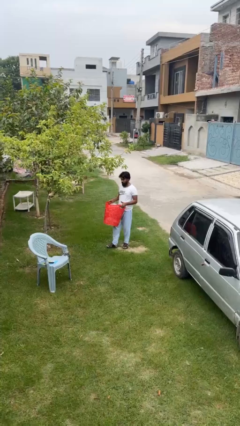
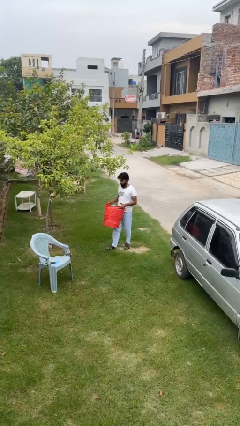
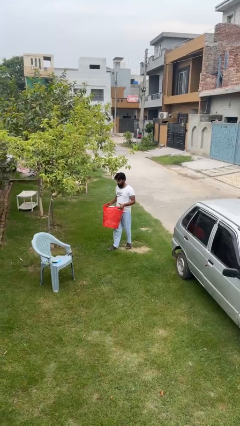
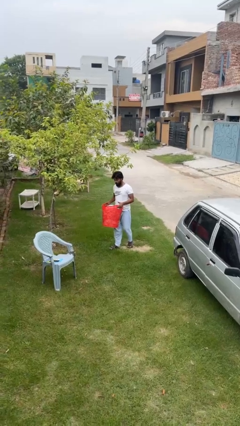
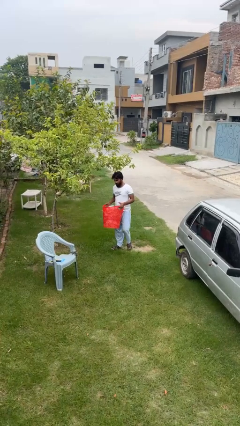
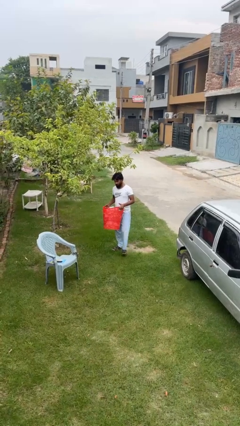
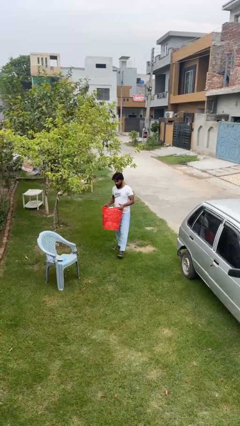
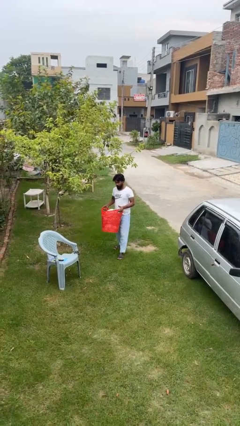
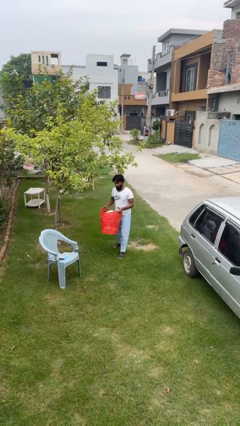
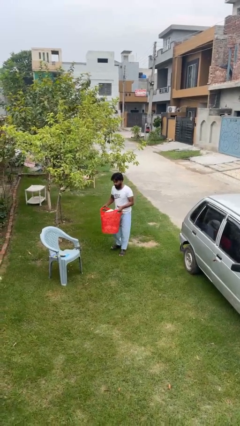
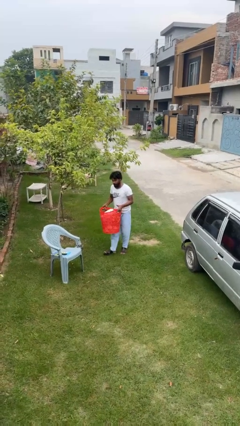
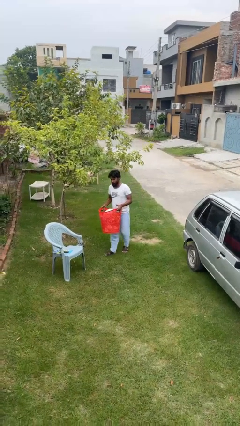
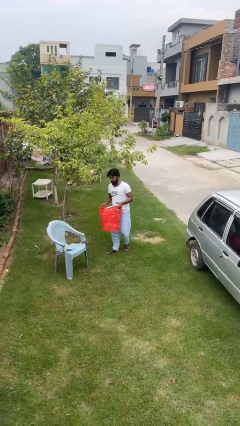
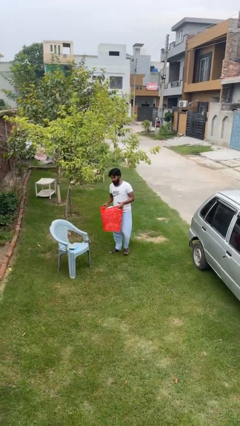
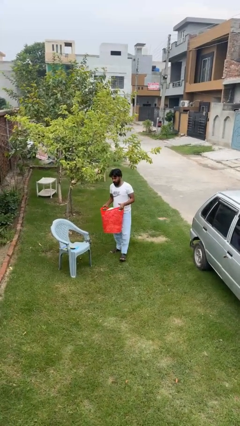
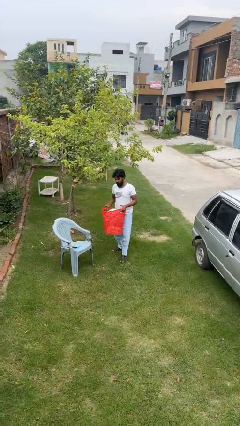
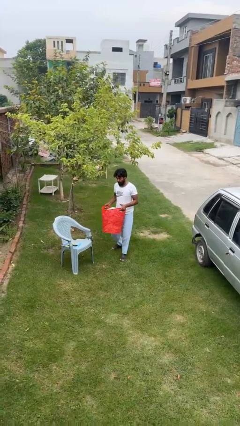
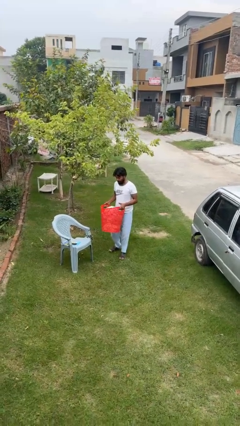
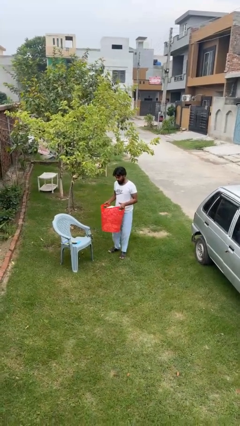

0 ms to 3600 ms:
person carries laundry basket

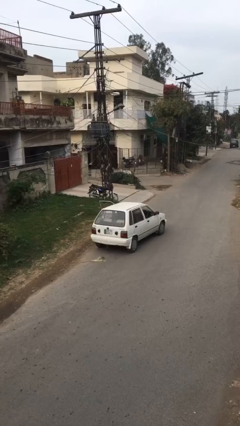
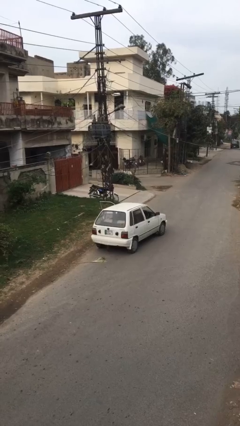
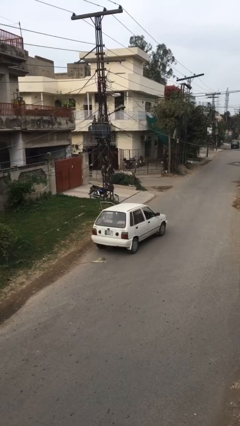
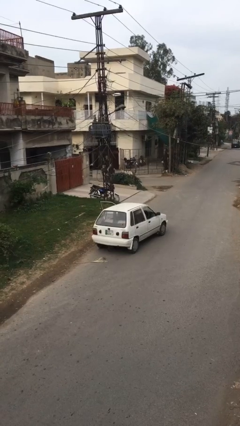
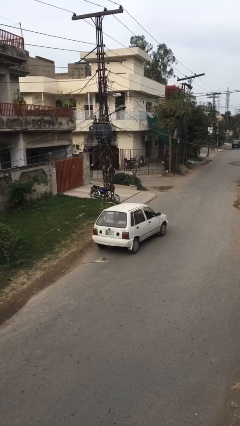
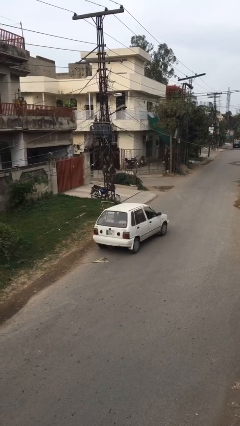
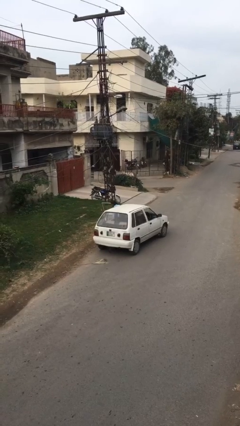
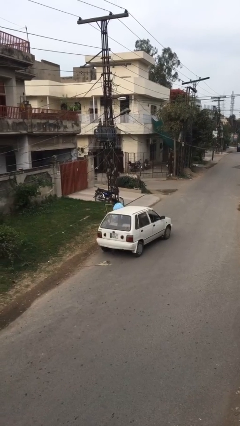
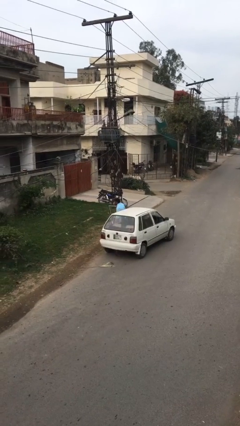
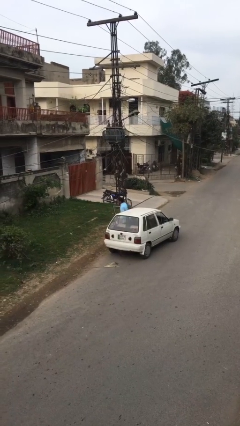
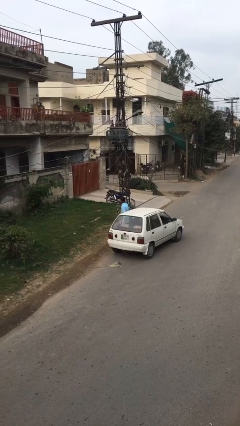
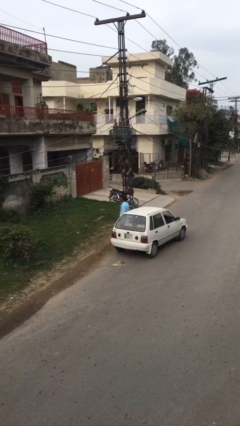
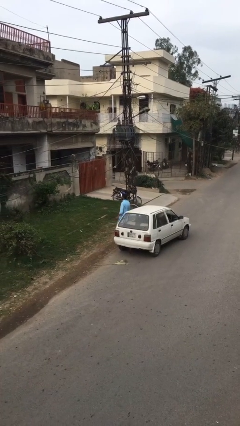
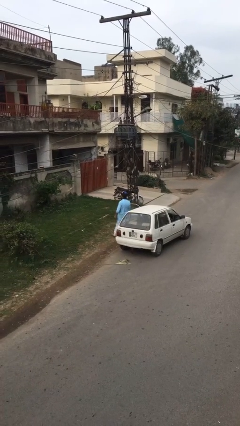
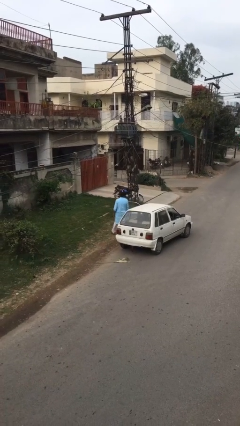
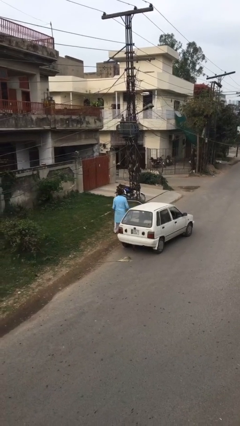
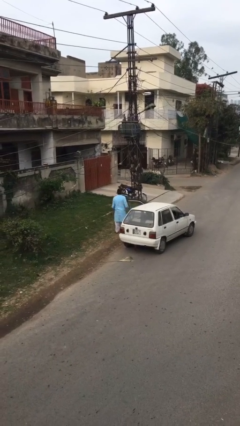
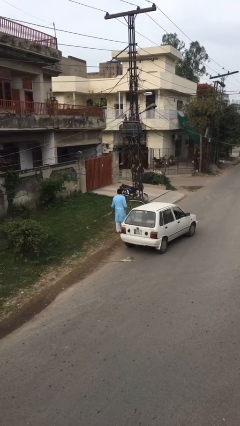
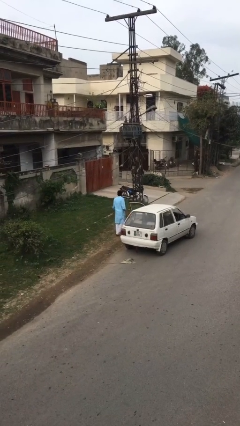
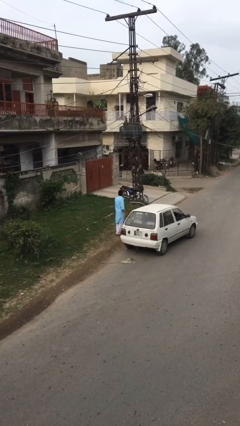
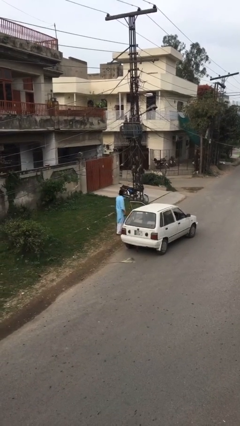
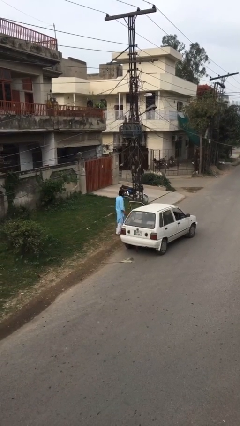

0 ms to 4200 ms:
person exits car

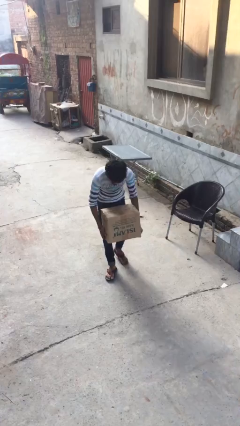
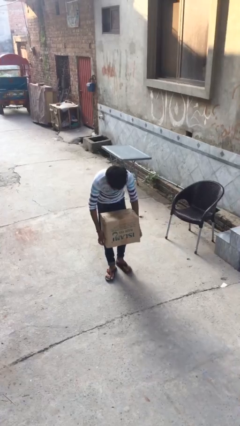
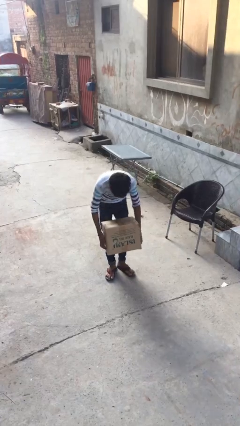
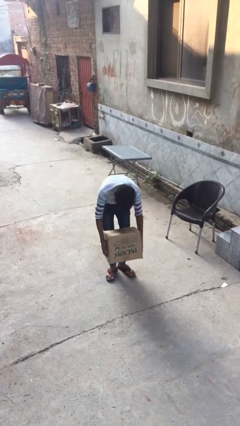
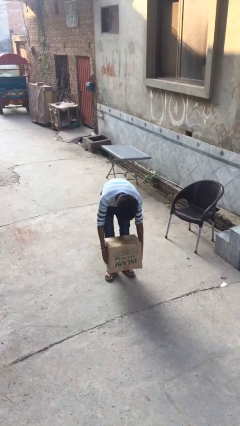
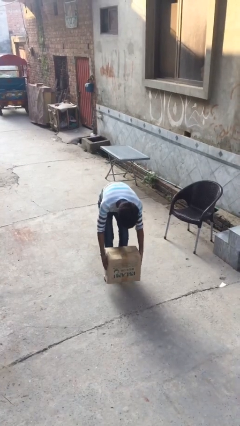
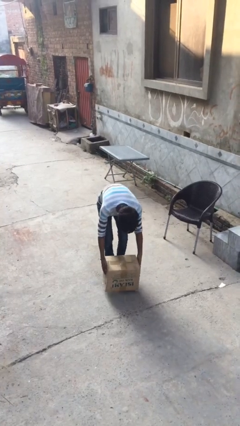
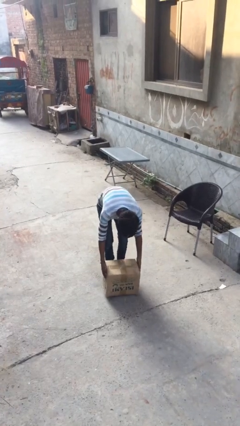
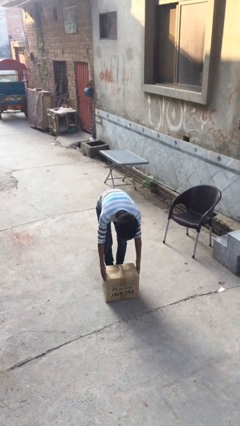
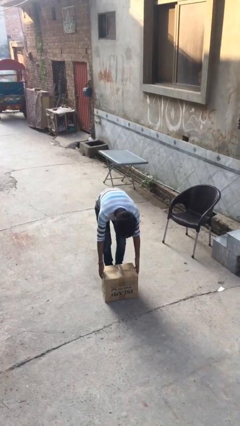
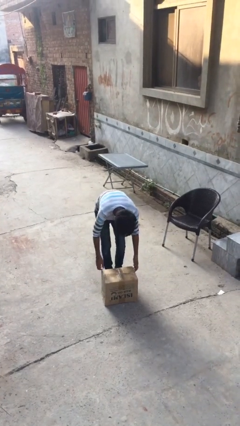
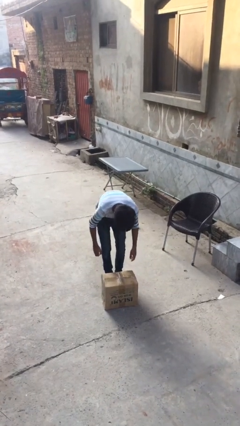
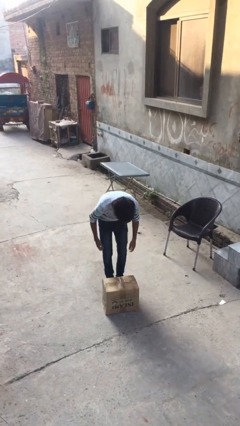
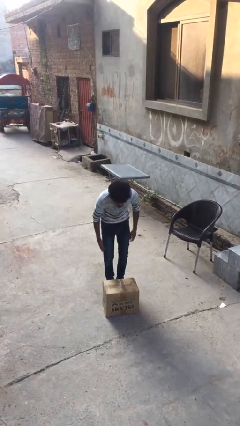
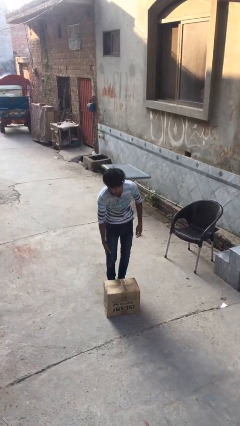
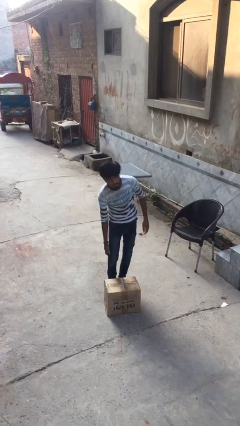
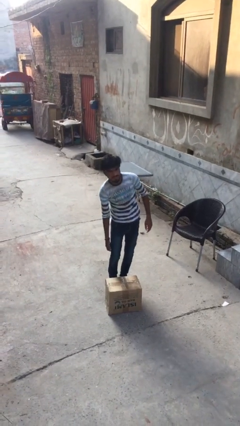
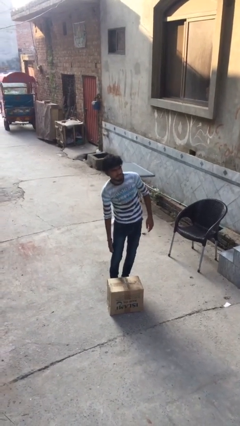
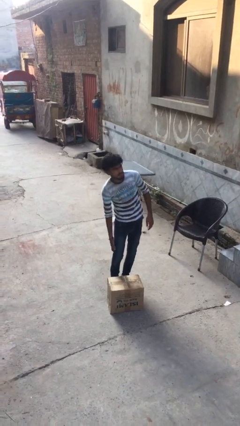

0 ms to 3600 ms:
person puts down object on floor

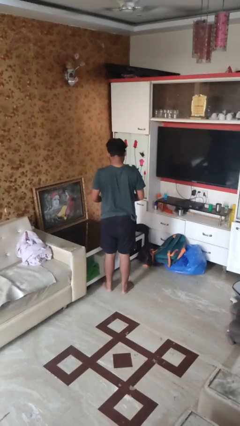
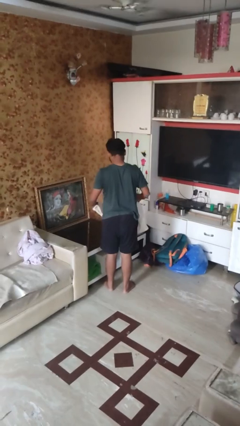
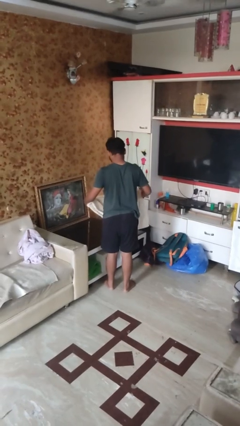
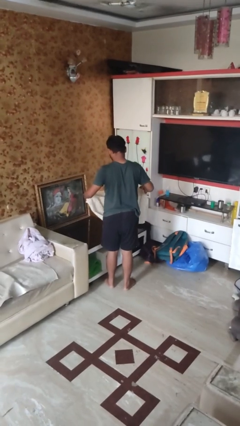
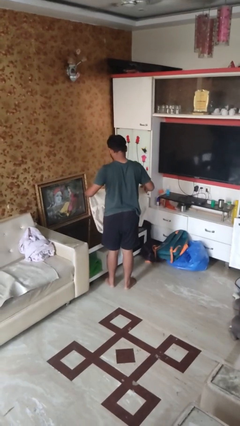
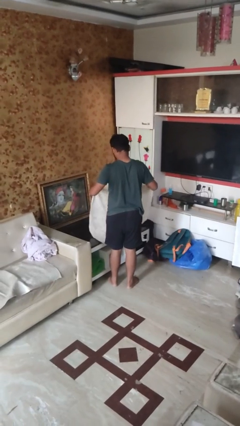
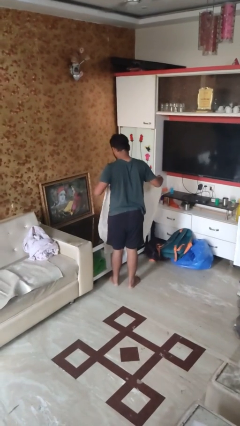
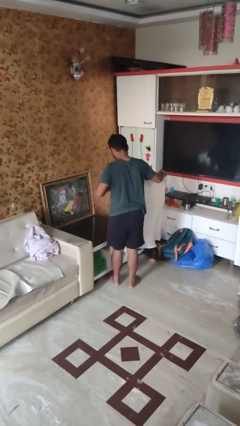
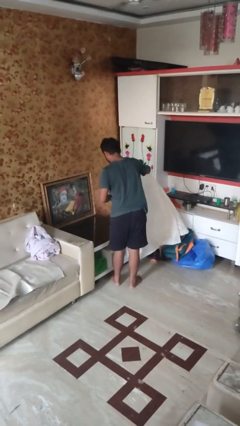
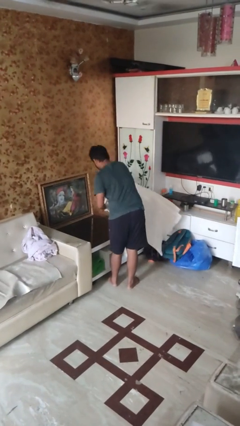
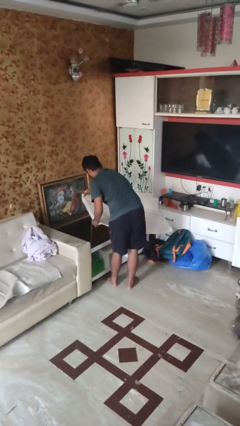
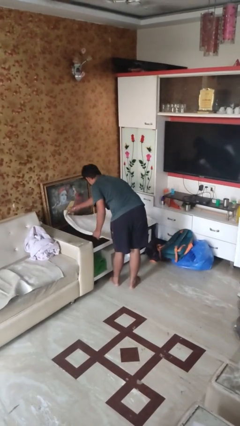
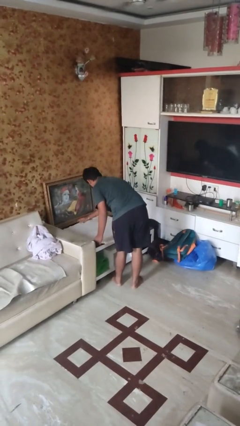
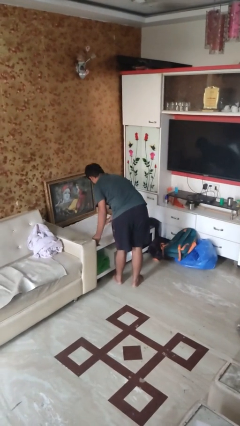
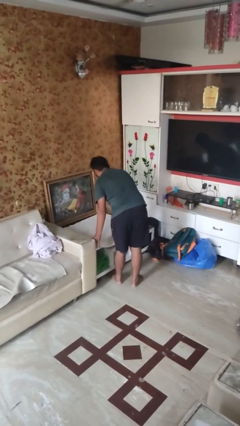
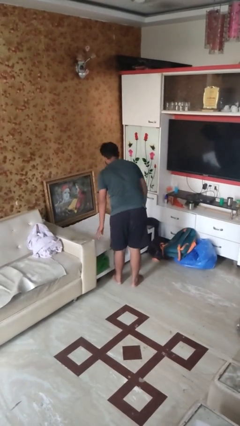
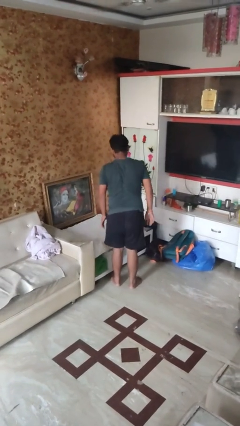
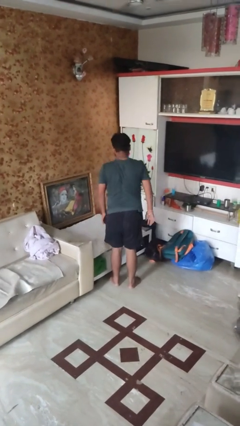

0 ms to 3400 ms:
person spreads tablecloth

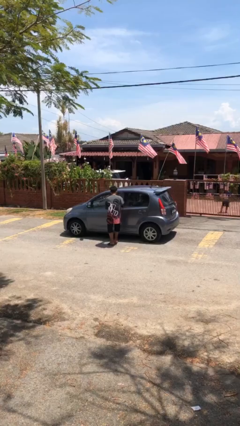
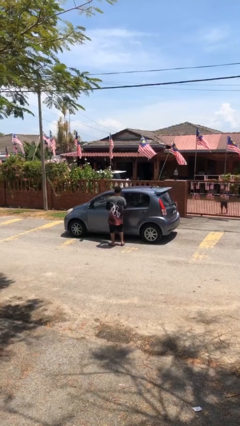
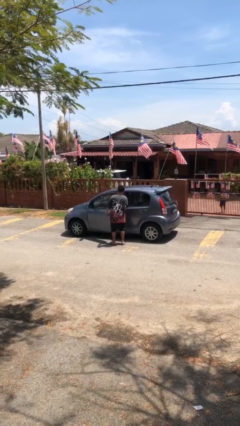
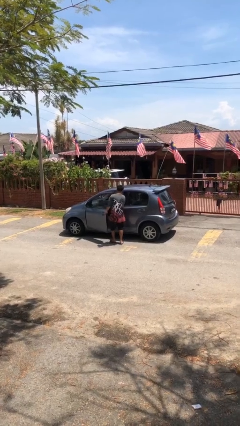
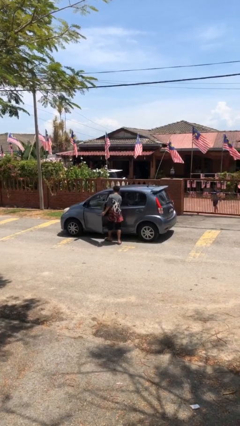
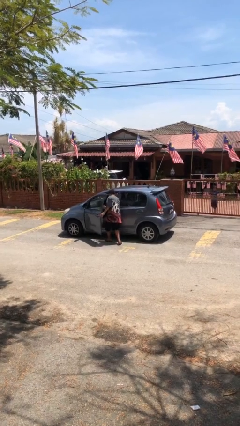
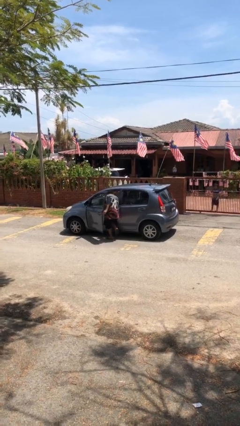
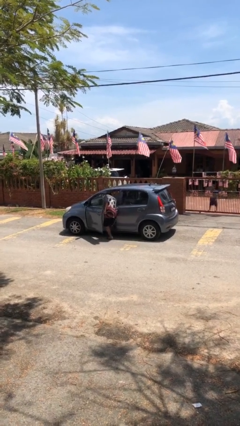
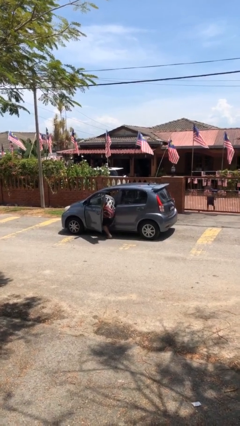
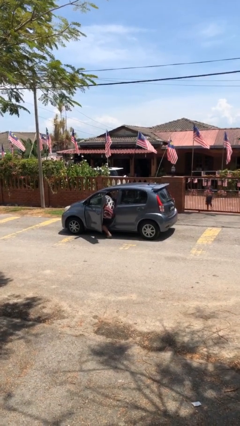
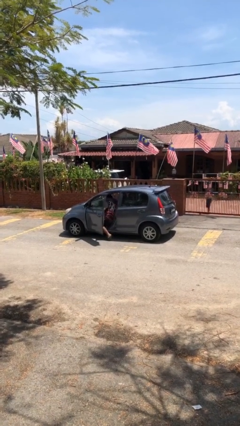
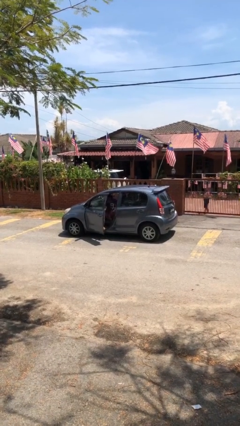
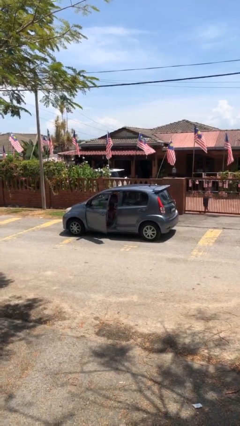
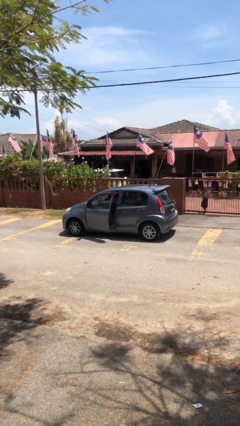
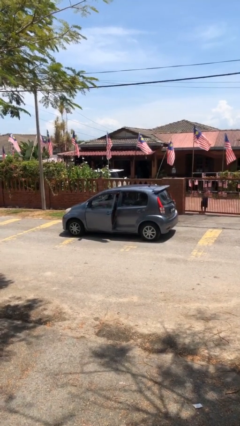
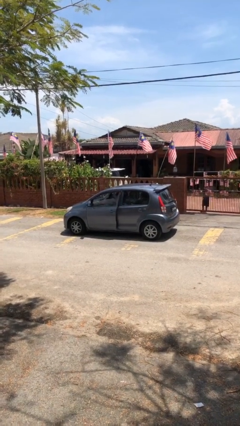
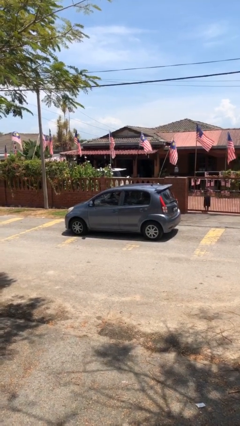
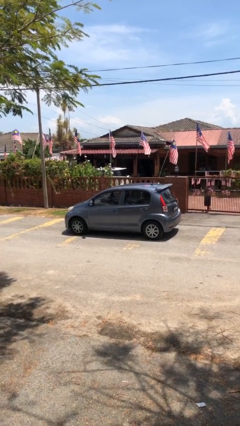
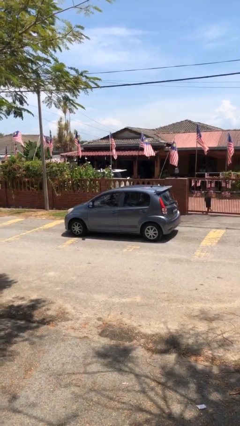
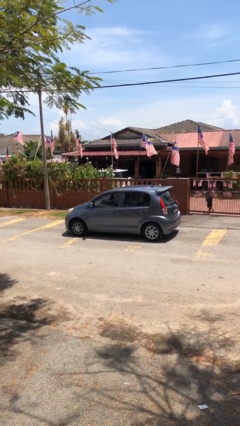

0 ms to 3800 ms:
car picks up person
